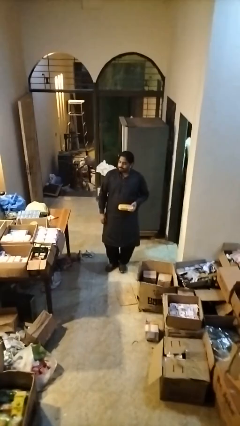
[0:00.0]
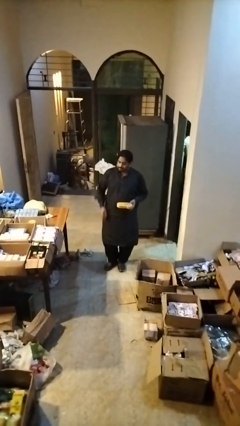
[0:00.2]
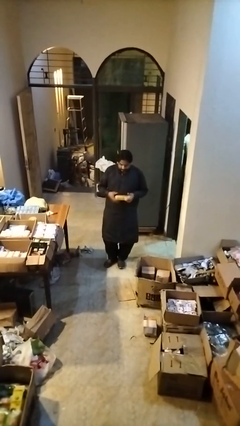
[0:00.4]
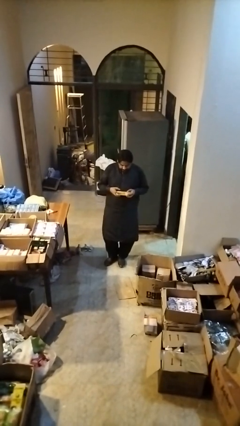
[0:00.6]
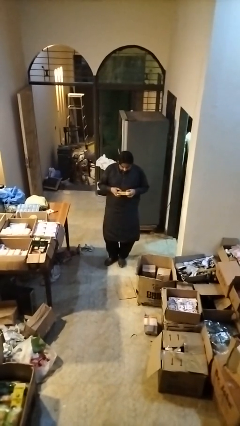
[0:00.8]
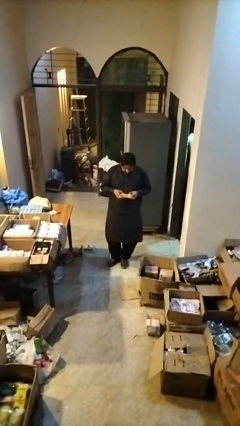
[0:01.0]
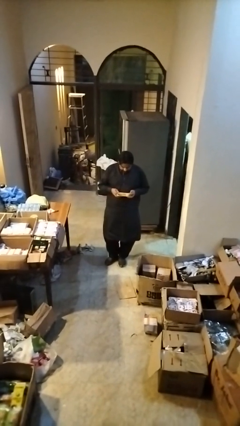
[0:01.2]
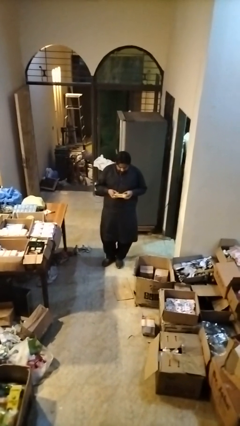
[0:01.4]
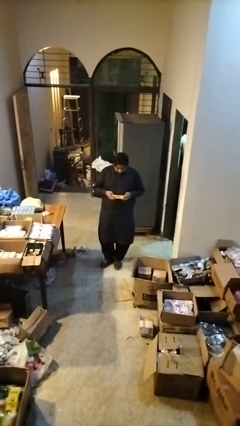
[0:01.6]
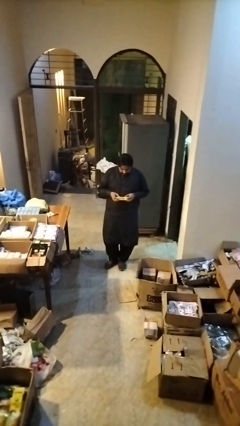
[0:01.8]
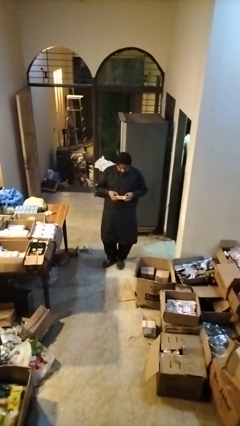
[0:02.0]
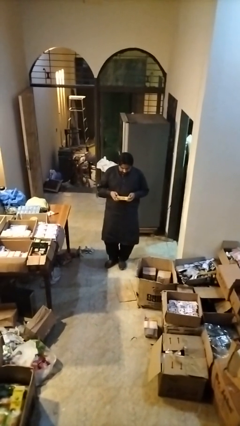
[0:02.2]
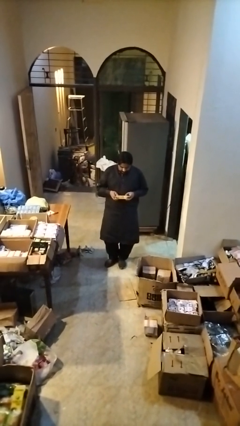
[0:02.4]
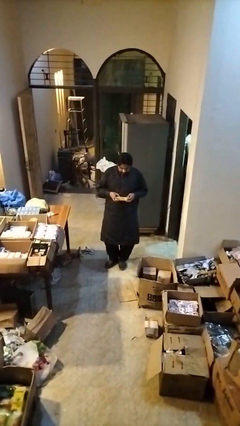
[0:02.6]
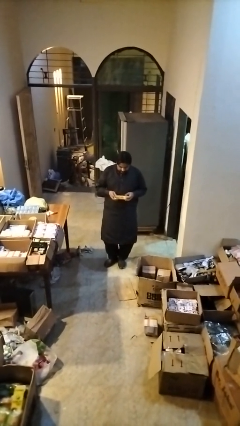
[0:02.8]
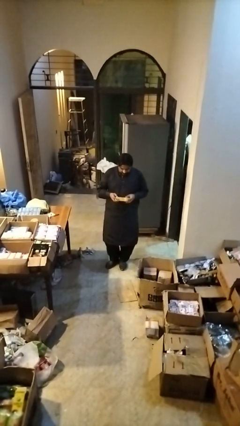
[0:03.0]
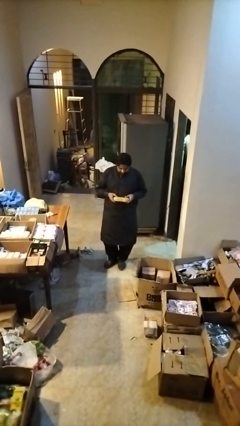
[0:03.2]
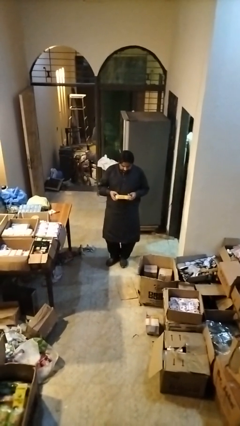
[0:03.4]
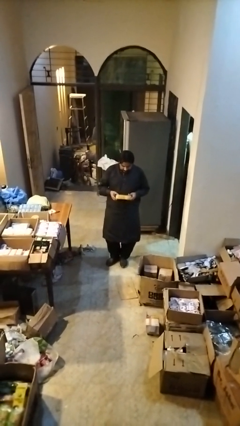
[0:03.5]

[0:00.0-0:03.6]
person interacts with handheld game

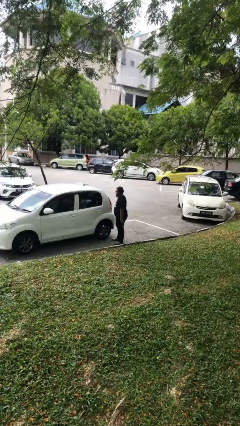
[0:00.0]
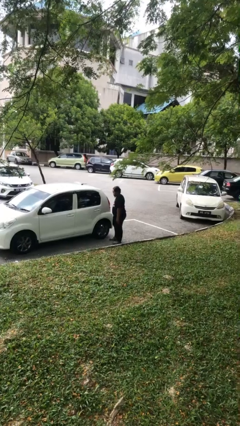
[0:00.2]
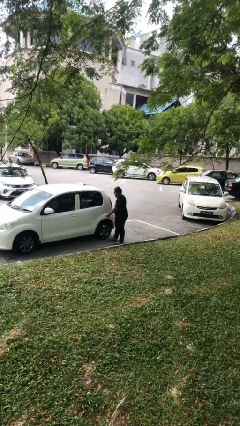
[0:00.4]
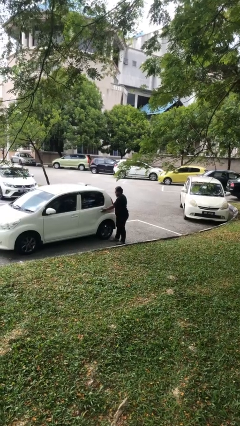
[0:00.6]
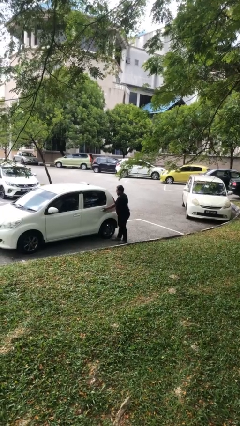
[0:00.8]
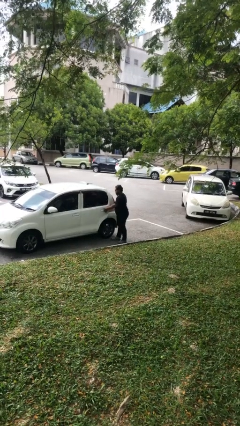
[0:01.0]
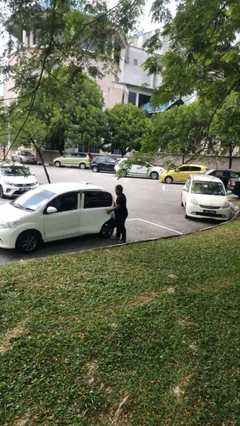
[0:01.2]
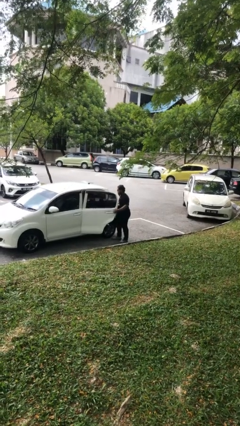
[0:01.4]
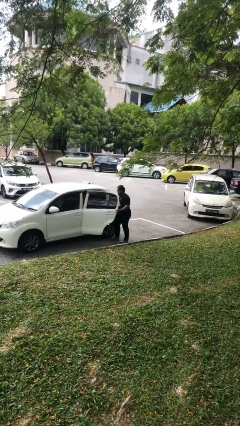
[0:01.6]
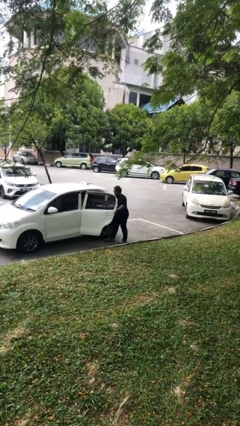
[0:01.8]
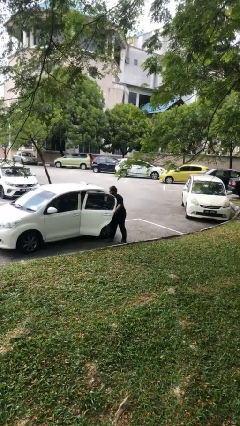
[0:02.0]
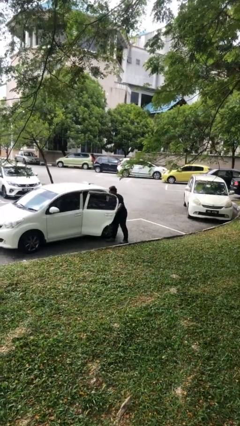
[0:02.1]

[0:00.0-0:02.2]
person opens car door

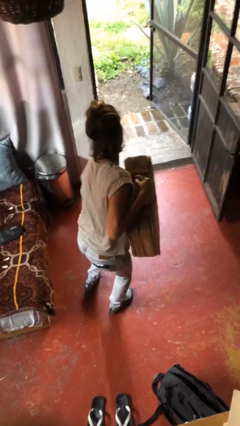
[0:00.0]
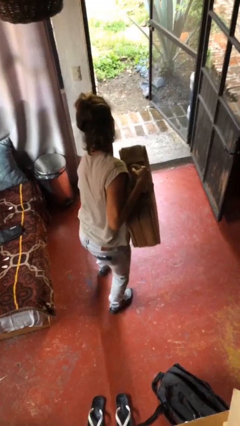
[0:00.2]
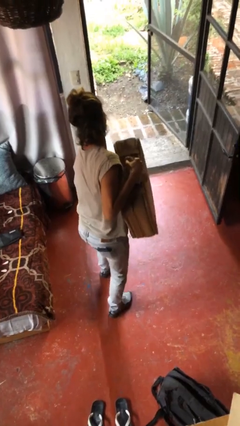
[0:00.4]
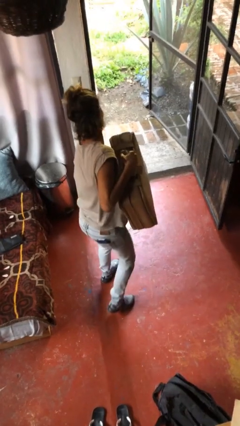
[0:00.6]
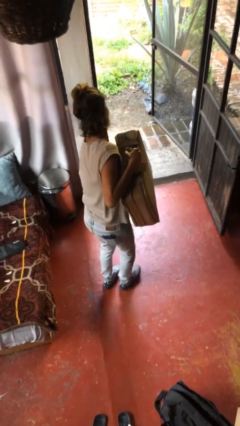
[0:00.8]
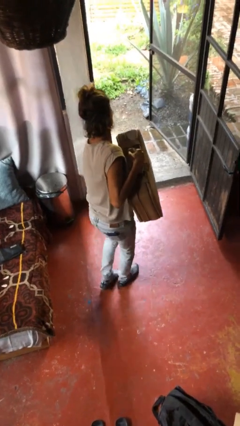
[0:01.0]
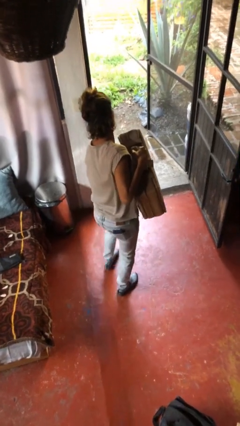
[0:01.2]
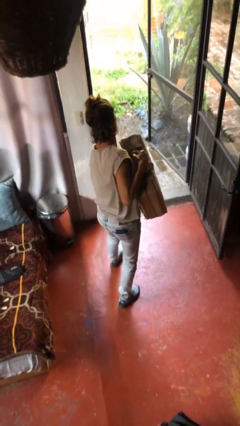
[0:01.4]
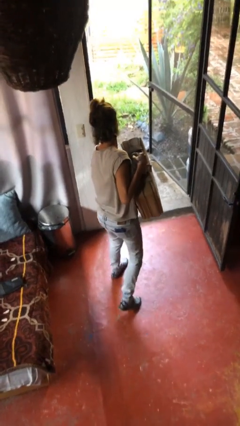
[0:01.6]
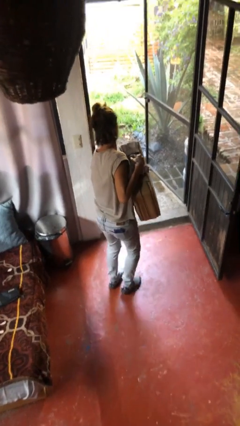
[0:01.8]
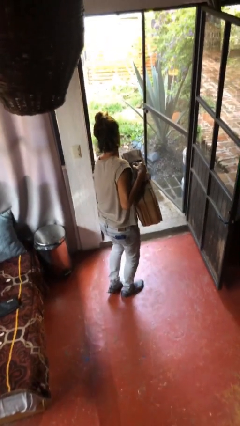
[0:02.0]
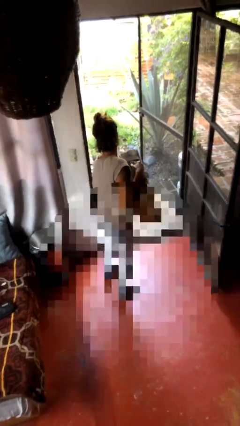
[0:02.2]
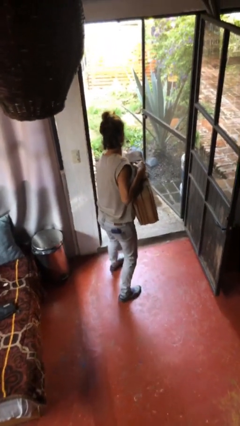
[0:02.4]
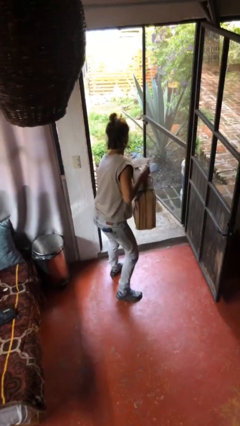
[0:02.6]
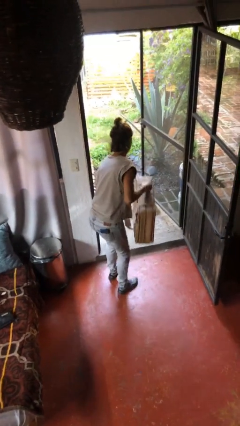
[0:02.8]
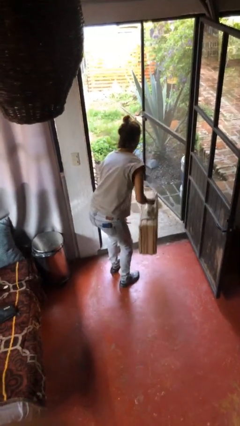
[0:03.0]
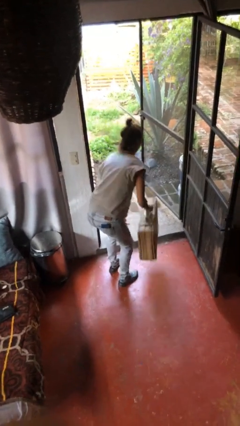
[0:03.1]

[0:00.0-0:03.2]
person carries heavy object

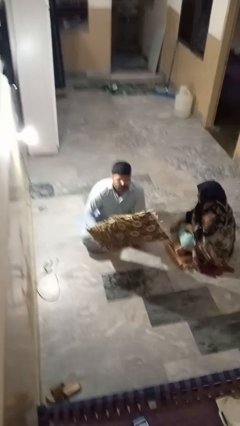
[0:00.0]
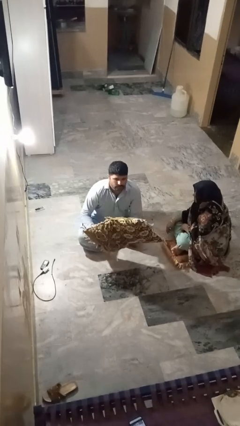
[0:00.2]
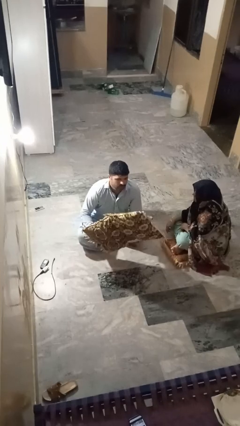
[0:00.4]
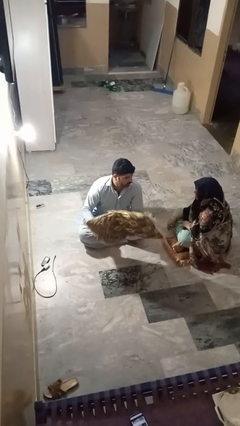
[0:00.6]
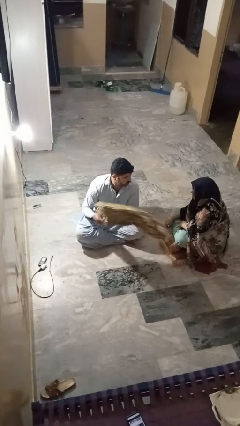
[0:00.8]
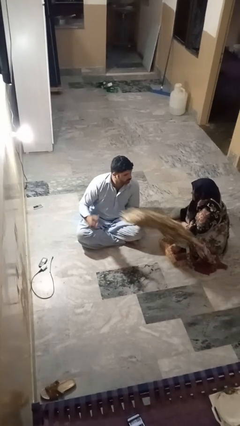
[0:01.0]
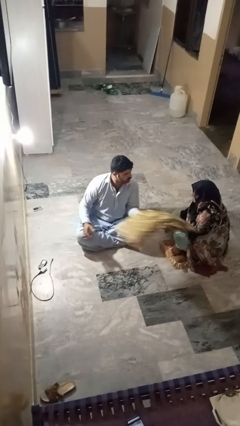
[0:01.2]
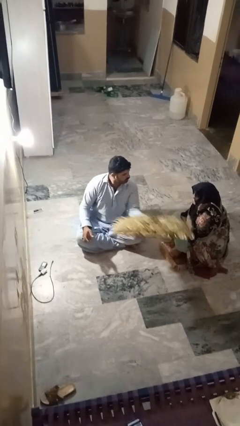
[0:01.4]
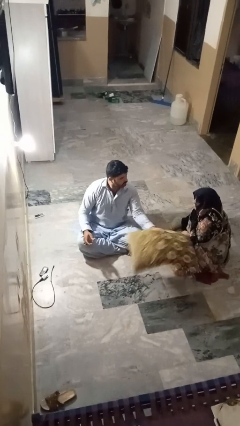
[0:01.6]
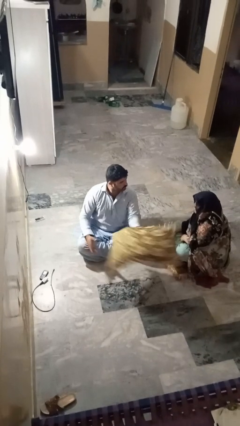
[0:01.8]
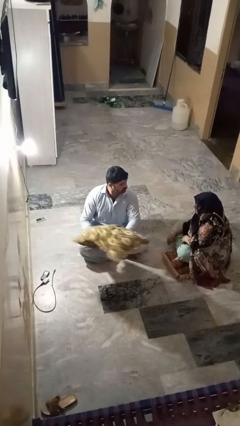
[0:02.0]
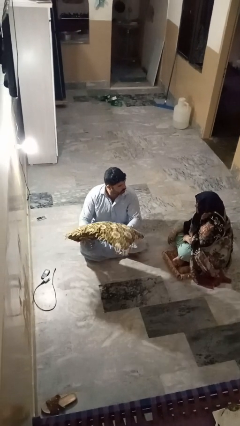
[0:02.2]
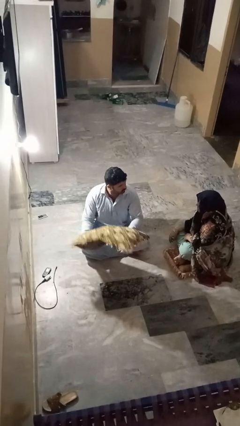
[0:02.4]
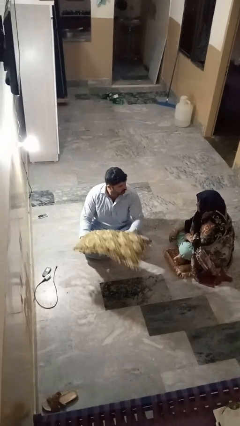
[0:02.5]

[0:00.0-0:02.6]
person hits person with pillow

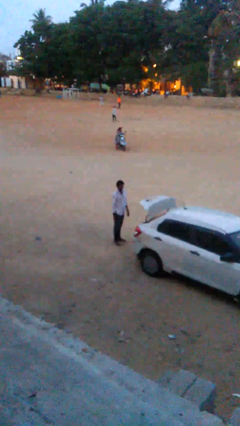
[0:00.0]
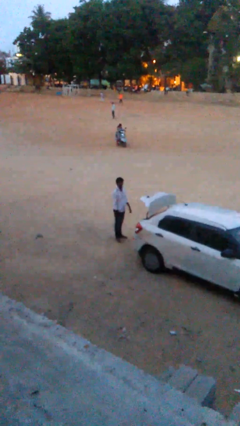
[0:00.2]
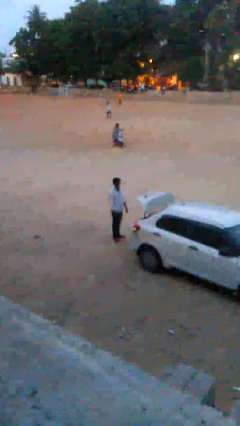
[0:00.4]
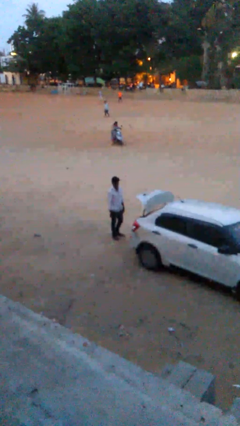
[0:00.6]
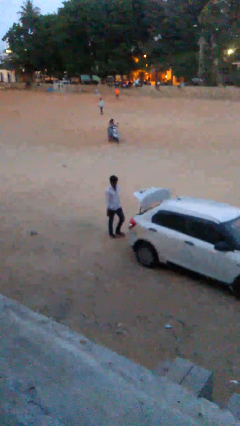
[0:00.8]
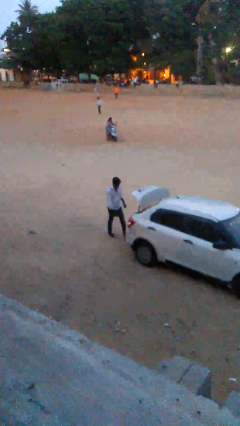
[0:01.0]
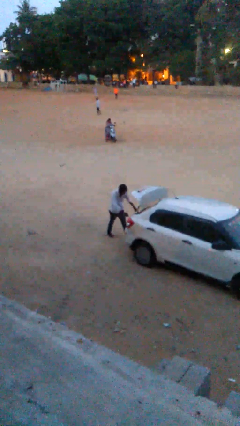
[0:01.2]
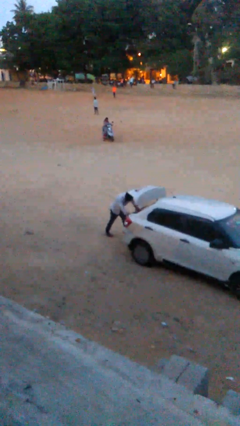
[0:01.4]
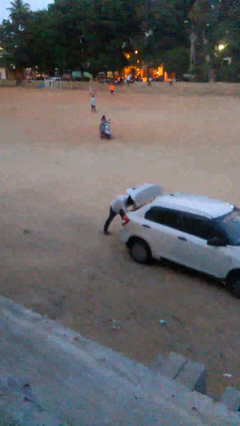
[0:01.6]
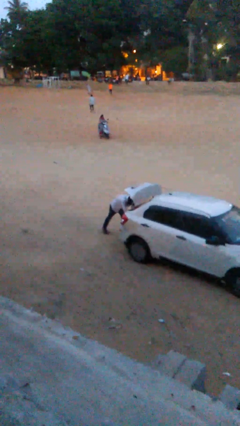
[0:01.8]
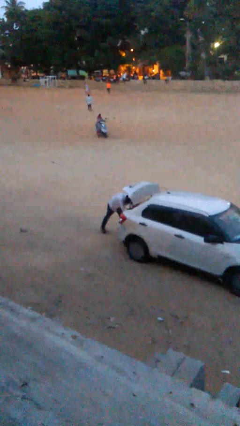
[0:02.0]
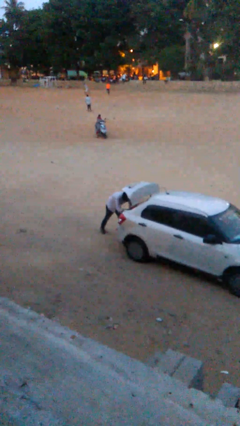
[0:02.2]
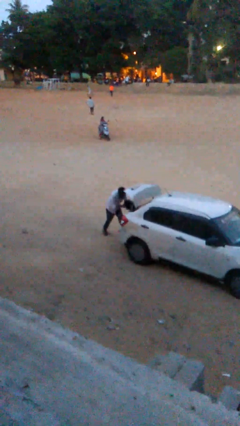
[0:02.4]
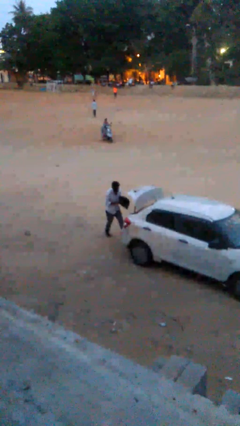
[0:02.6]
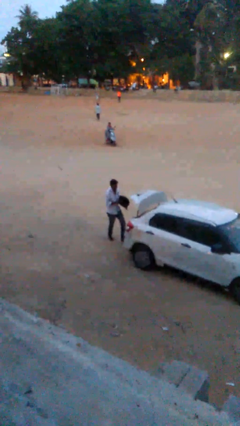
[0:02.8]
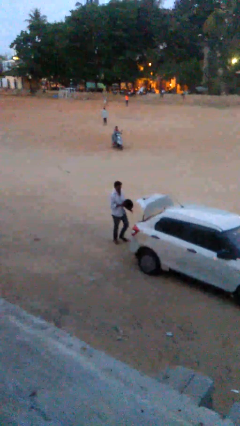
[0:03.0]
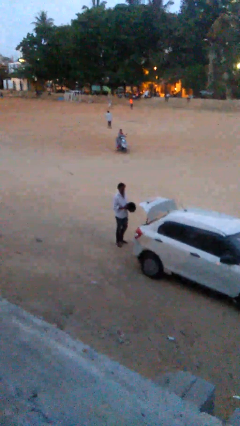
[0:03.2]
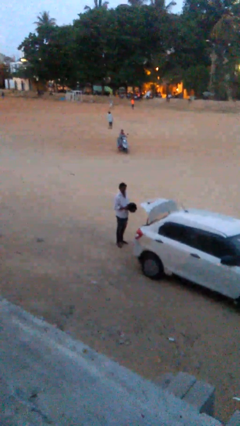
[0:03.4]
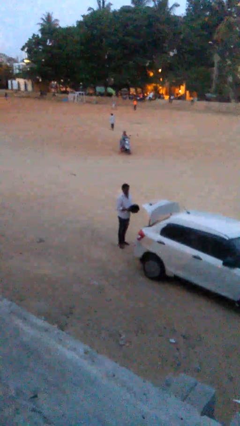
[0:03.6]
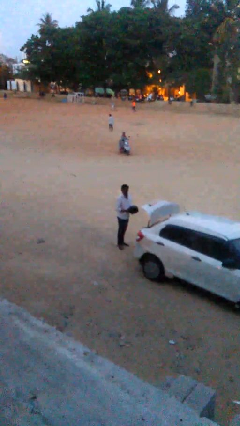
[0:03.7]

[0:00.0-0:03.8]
person unloads car

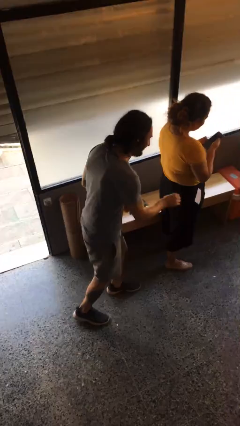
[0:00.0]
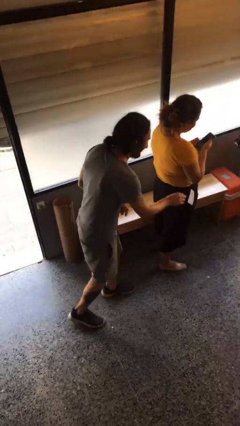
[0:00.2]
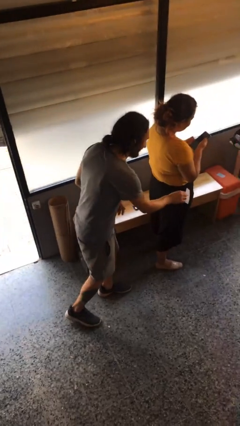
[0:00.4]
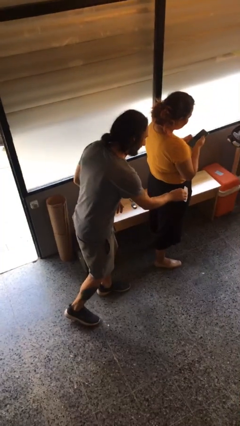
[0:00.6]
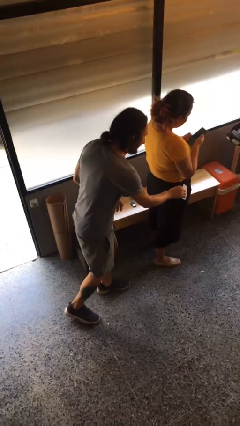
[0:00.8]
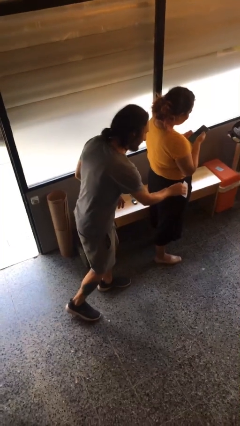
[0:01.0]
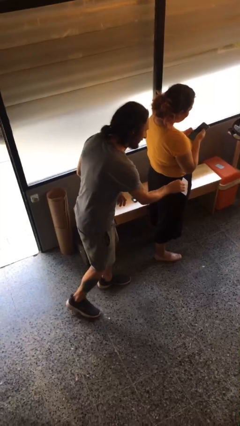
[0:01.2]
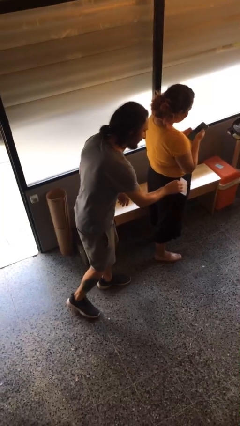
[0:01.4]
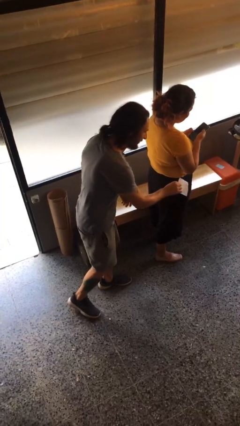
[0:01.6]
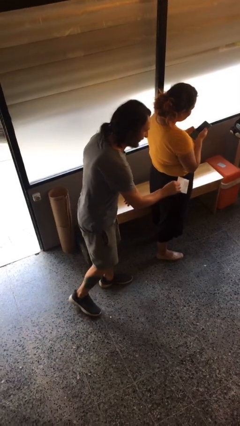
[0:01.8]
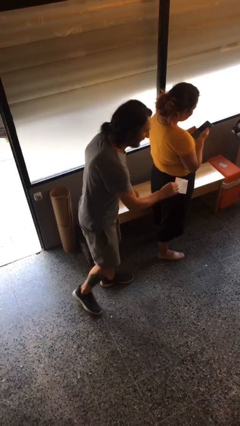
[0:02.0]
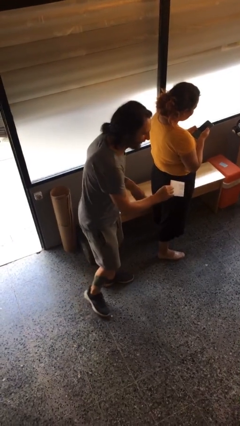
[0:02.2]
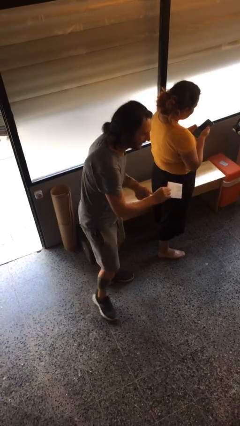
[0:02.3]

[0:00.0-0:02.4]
person steals object from person
